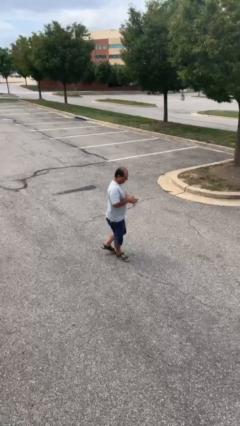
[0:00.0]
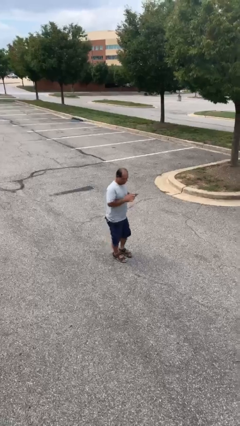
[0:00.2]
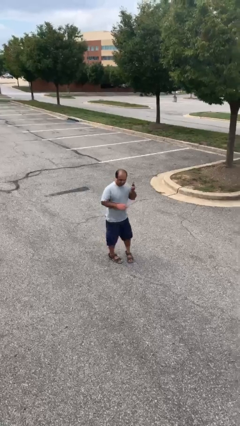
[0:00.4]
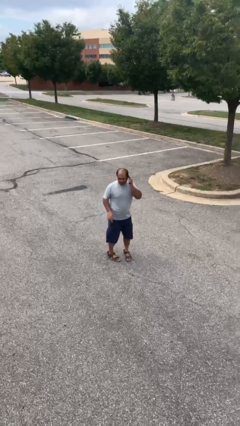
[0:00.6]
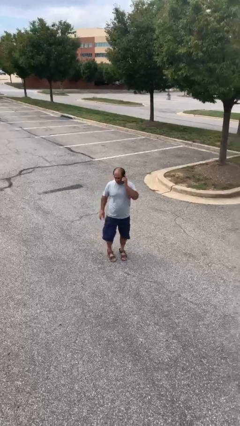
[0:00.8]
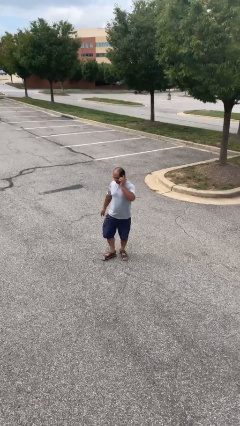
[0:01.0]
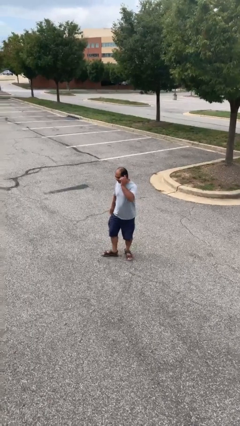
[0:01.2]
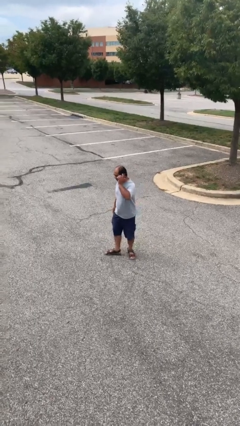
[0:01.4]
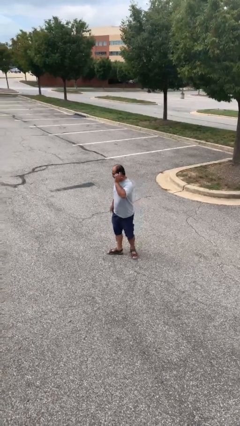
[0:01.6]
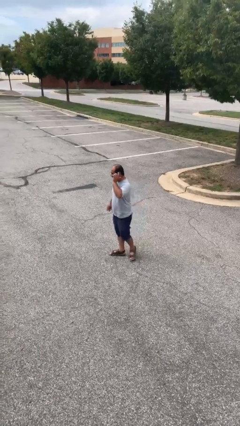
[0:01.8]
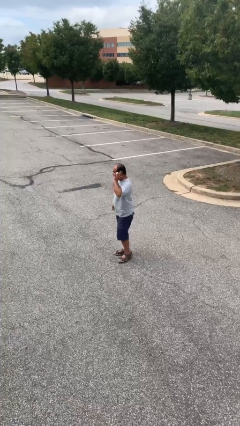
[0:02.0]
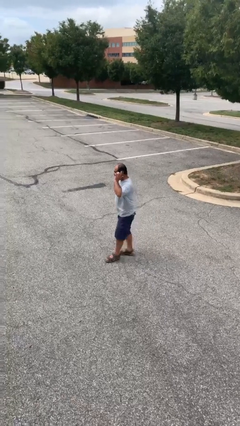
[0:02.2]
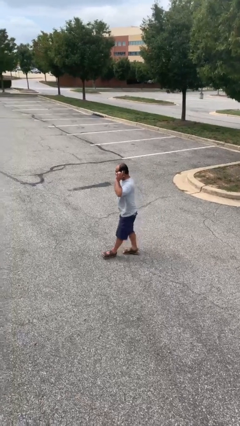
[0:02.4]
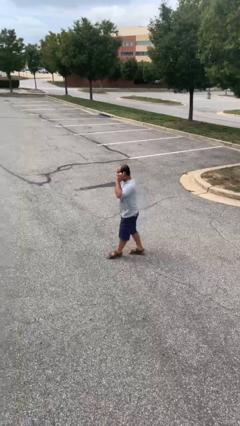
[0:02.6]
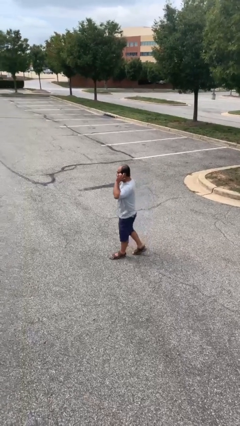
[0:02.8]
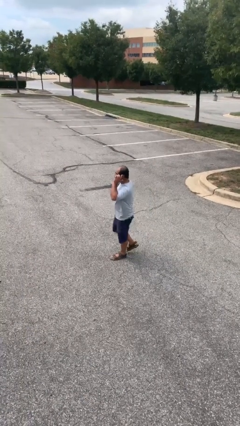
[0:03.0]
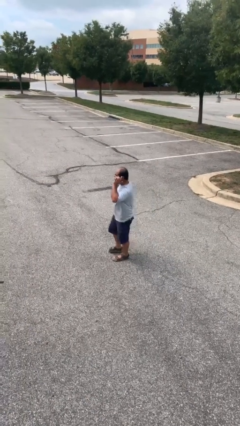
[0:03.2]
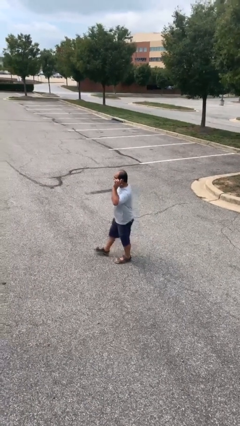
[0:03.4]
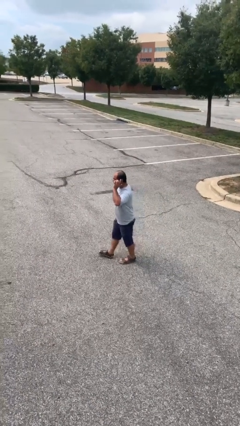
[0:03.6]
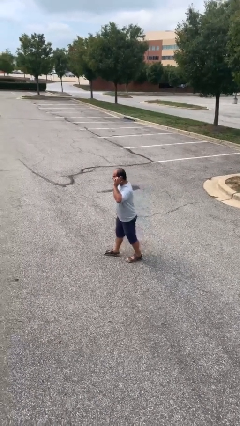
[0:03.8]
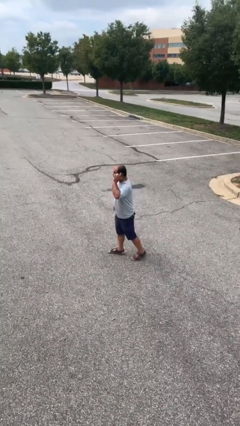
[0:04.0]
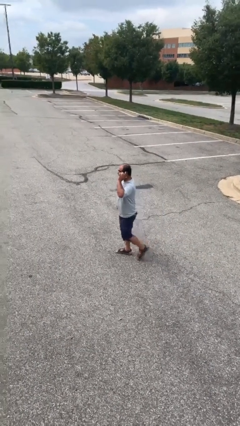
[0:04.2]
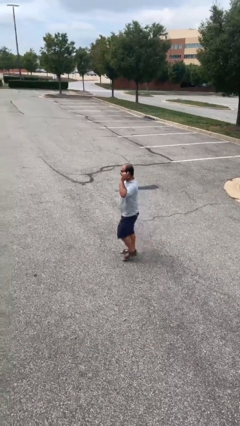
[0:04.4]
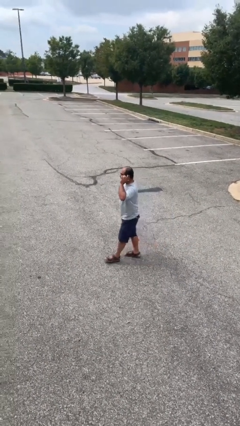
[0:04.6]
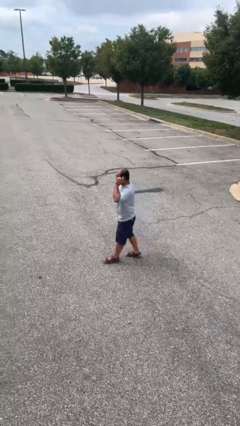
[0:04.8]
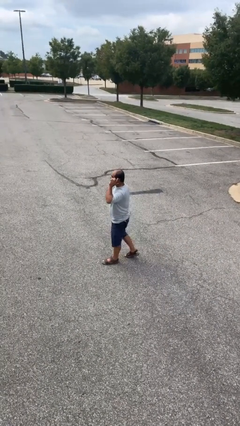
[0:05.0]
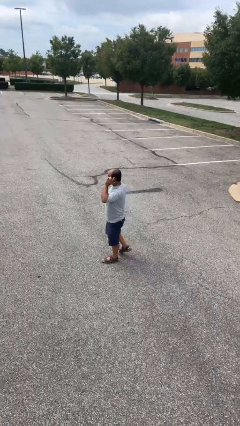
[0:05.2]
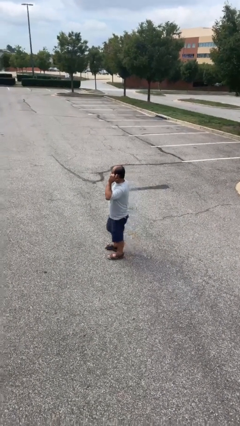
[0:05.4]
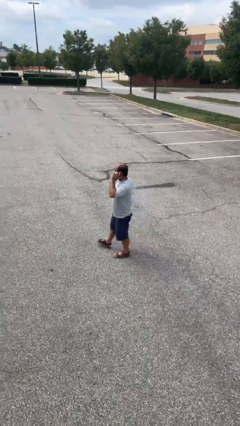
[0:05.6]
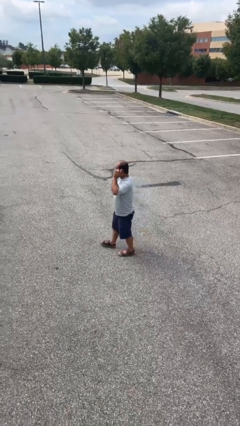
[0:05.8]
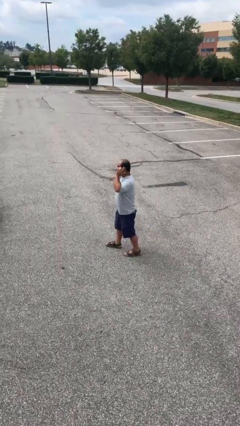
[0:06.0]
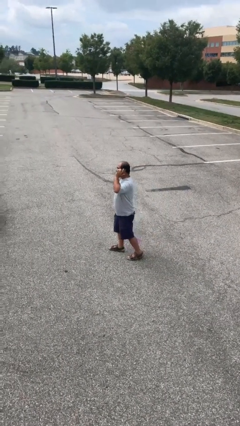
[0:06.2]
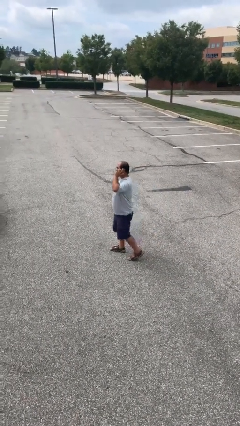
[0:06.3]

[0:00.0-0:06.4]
person talks on phone

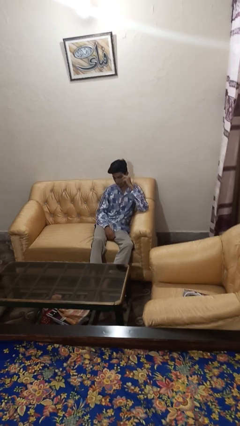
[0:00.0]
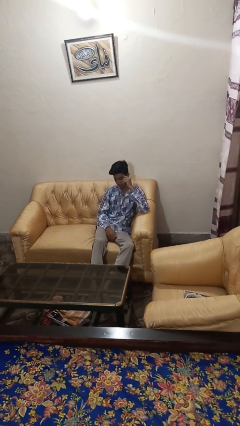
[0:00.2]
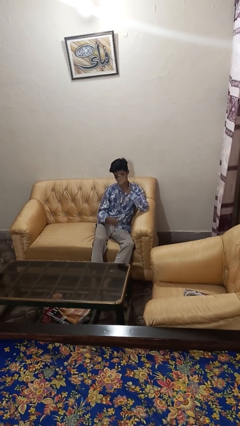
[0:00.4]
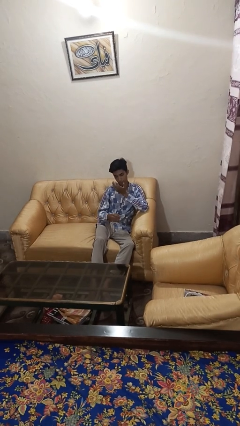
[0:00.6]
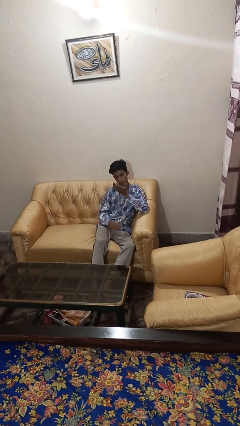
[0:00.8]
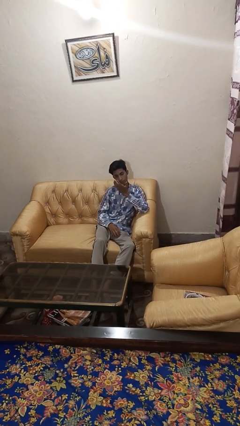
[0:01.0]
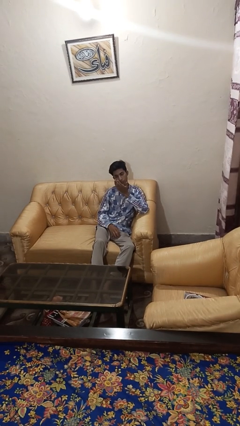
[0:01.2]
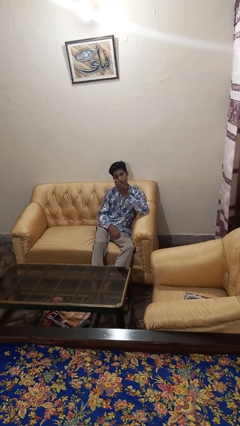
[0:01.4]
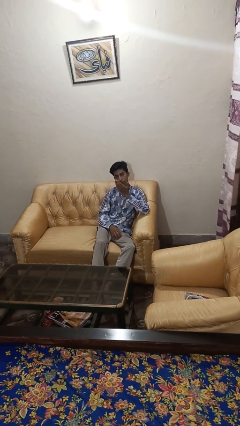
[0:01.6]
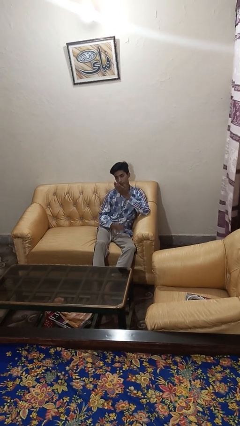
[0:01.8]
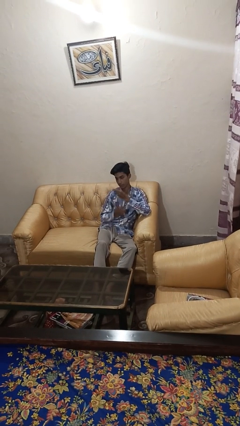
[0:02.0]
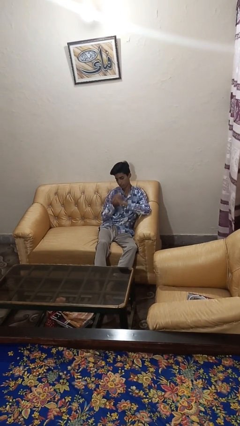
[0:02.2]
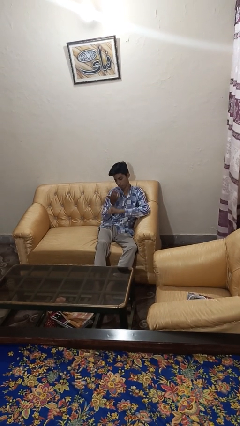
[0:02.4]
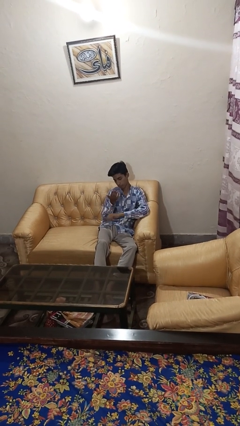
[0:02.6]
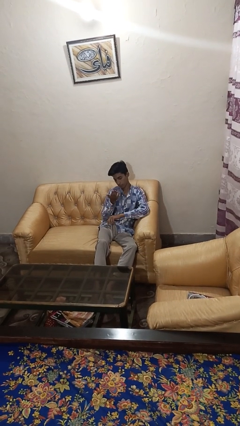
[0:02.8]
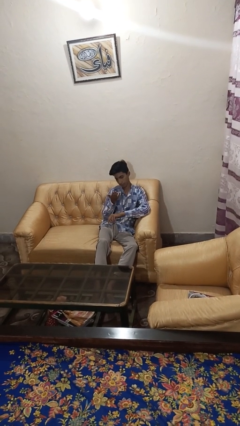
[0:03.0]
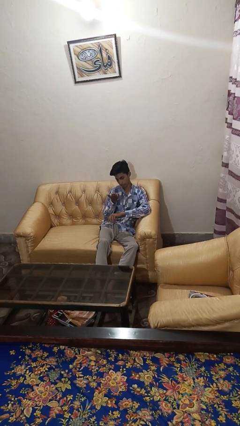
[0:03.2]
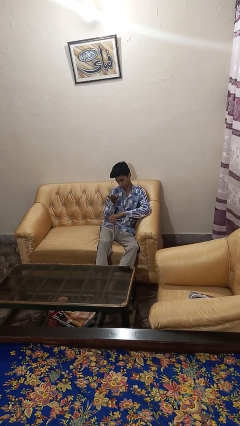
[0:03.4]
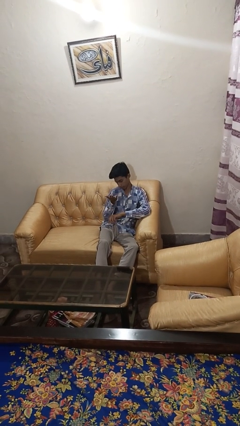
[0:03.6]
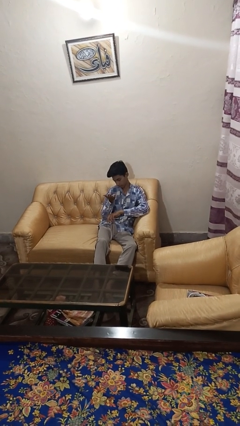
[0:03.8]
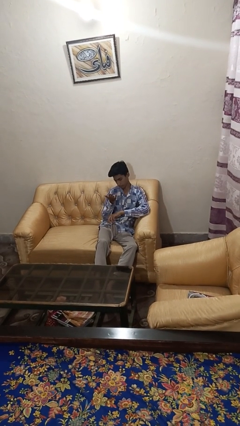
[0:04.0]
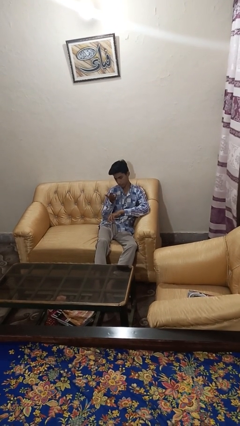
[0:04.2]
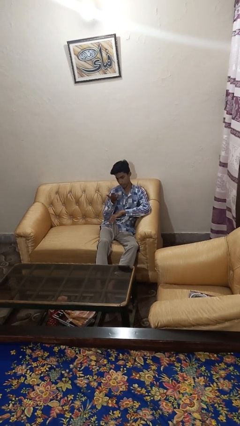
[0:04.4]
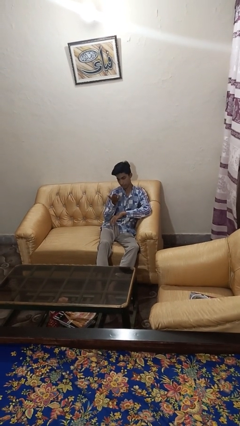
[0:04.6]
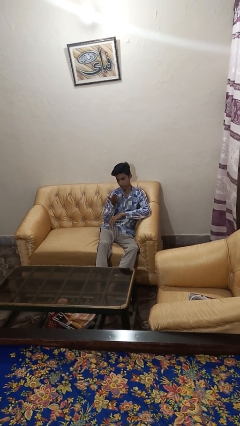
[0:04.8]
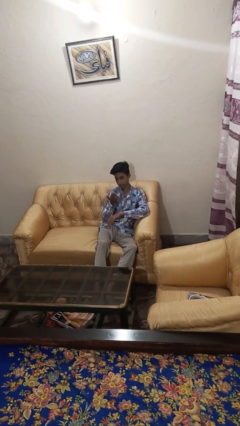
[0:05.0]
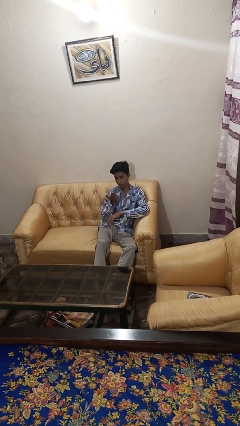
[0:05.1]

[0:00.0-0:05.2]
person looks at hands in lap

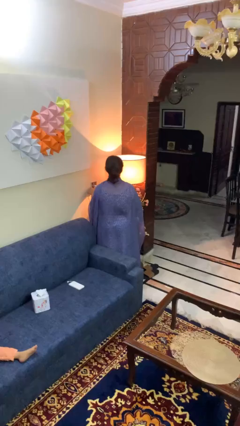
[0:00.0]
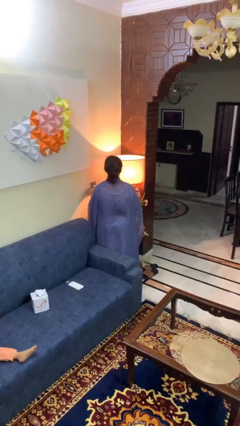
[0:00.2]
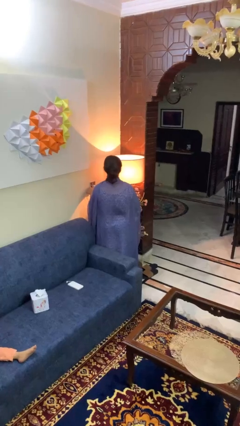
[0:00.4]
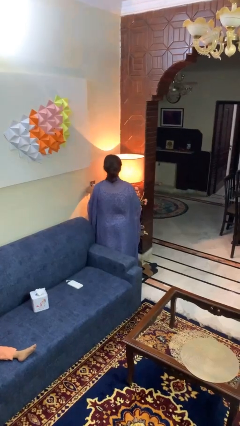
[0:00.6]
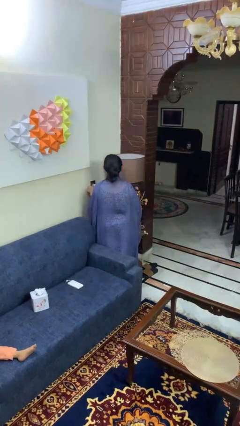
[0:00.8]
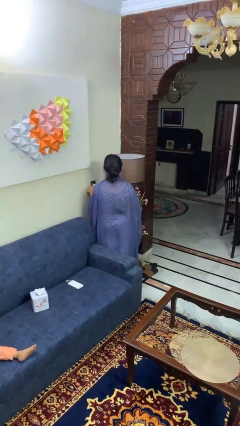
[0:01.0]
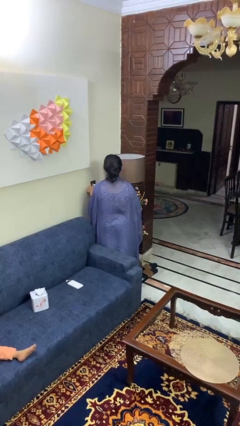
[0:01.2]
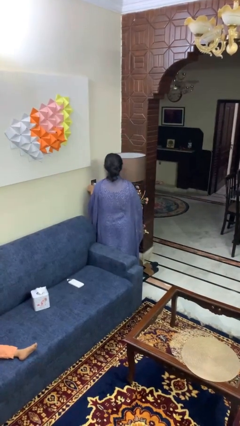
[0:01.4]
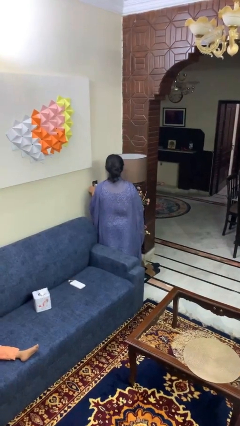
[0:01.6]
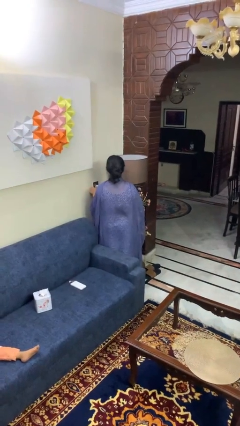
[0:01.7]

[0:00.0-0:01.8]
person turns off lamp

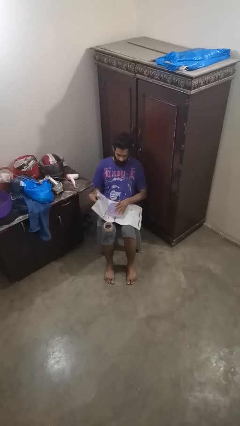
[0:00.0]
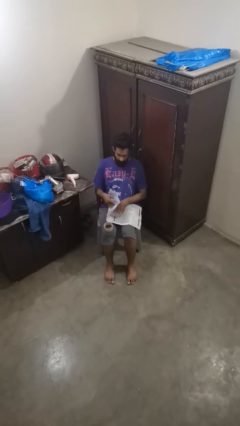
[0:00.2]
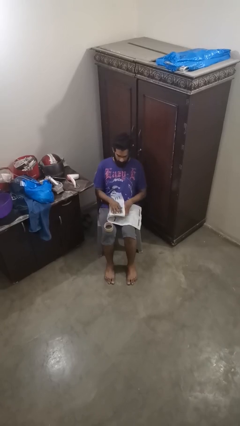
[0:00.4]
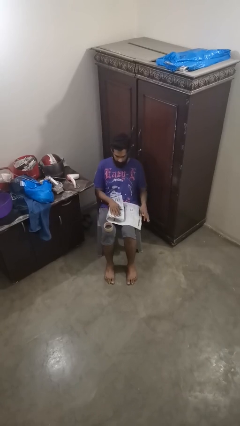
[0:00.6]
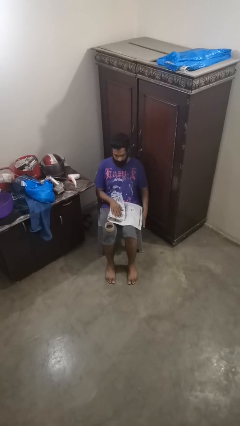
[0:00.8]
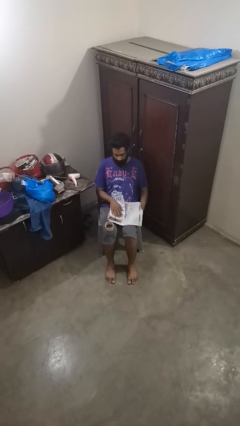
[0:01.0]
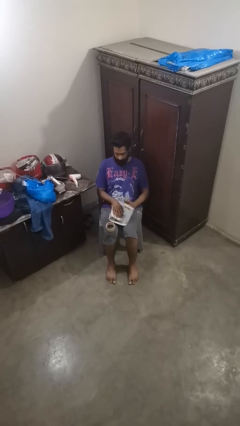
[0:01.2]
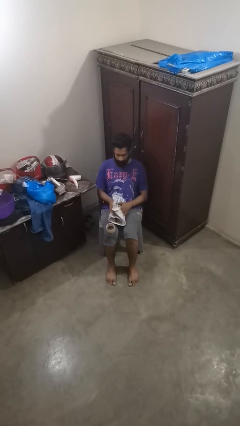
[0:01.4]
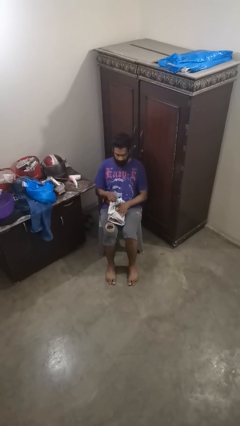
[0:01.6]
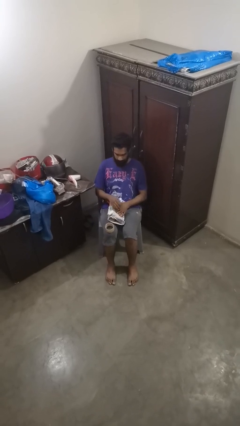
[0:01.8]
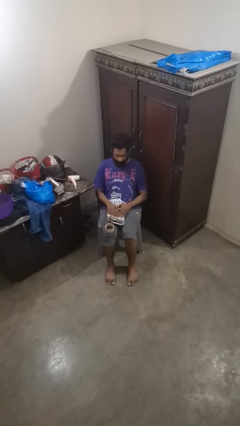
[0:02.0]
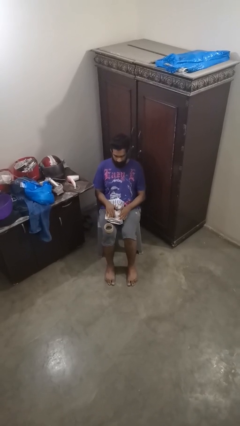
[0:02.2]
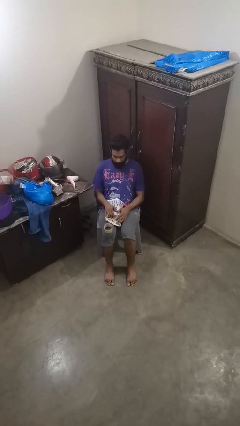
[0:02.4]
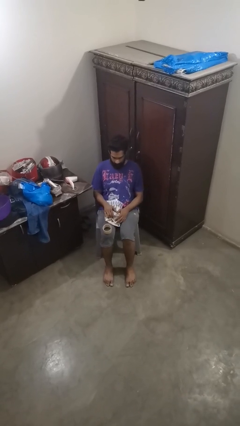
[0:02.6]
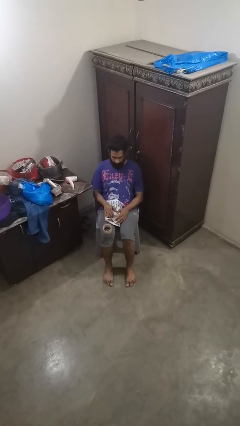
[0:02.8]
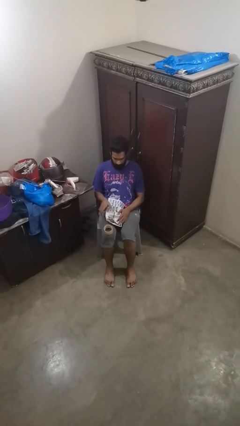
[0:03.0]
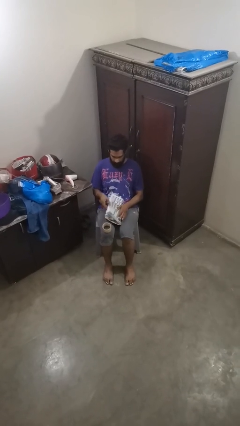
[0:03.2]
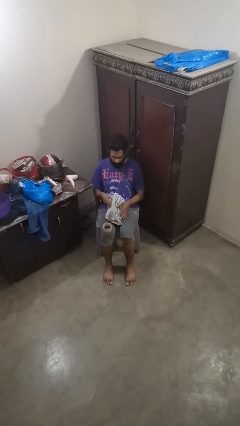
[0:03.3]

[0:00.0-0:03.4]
person wraps box

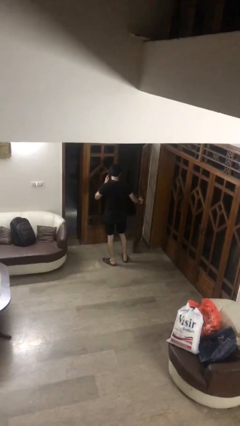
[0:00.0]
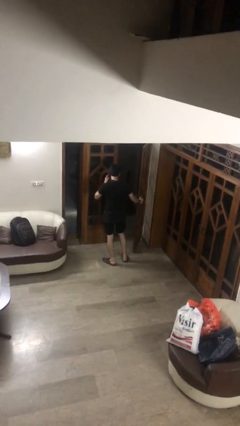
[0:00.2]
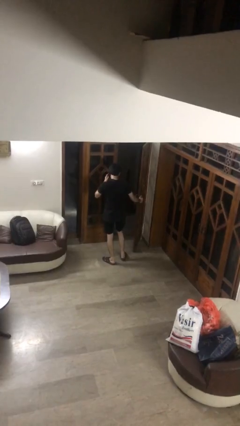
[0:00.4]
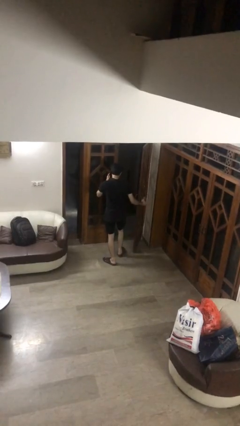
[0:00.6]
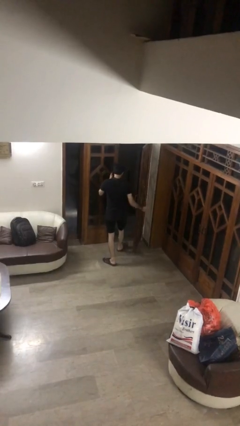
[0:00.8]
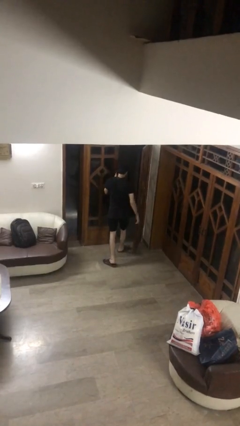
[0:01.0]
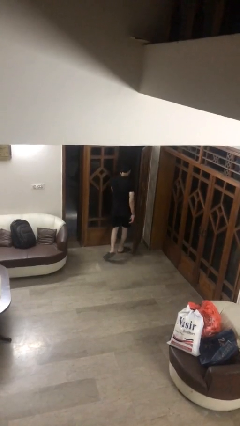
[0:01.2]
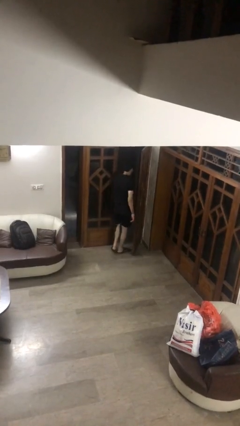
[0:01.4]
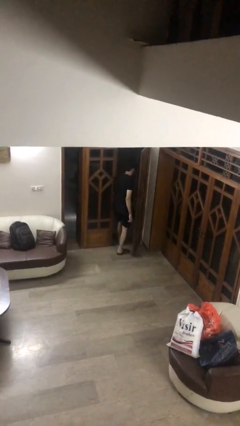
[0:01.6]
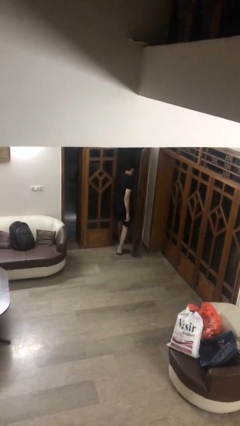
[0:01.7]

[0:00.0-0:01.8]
person exits scene through structure
